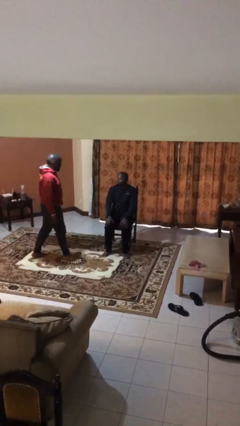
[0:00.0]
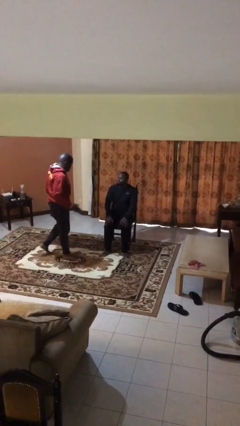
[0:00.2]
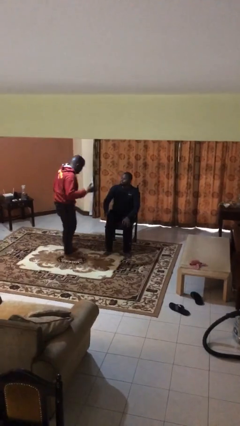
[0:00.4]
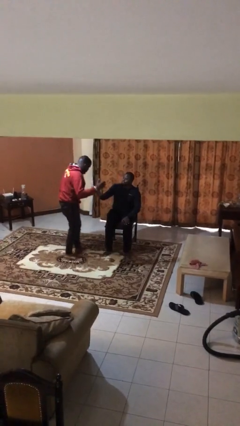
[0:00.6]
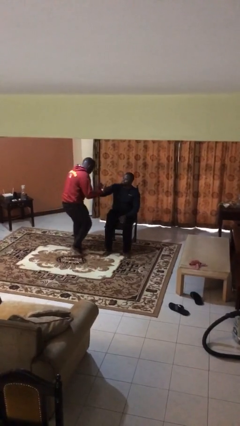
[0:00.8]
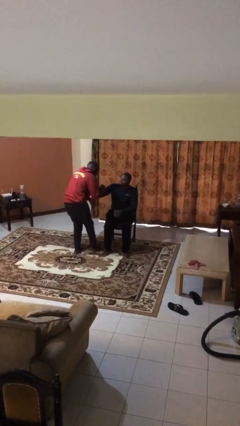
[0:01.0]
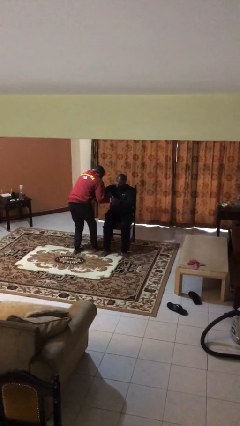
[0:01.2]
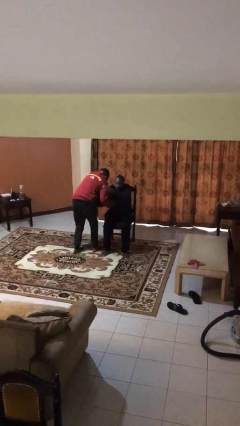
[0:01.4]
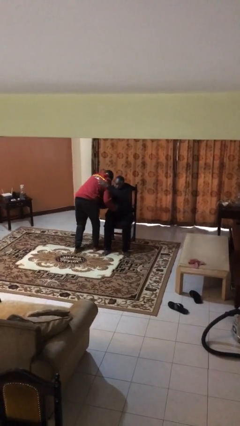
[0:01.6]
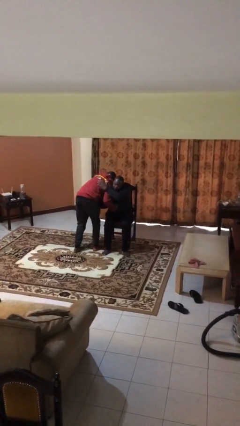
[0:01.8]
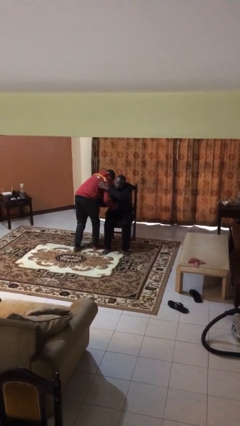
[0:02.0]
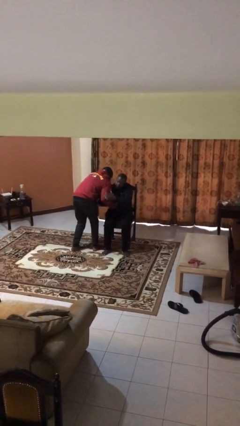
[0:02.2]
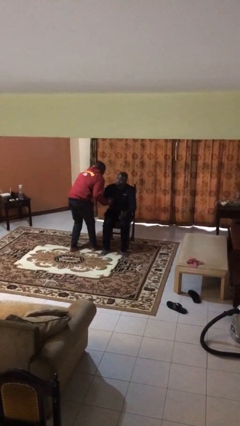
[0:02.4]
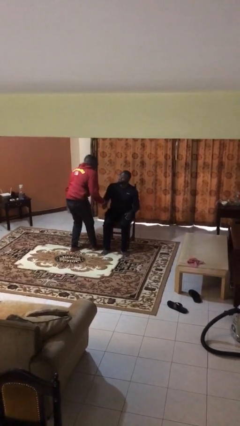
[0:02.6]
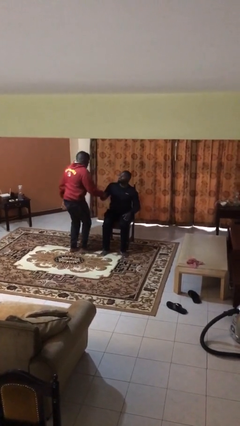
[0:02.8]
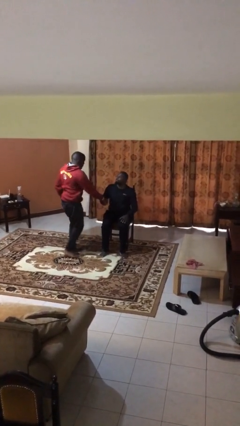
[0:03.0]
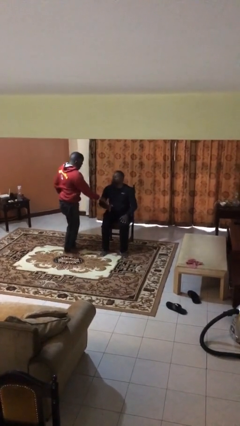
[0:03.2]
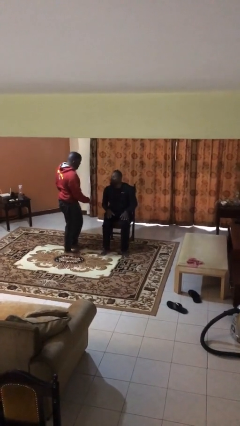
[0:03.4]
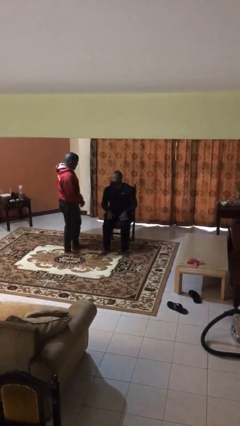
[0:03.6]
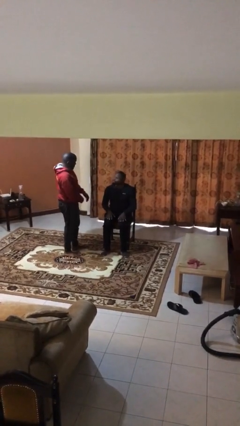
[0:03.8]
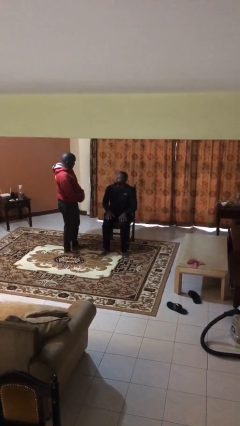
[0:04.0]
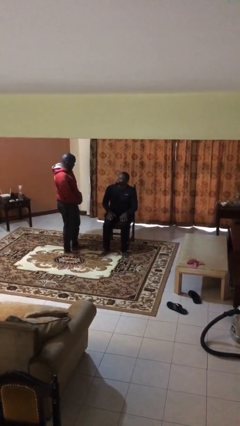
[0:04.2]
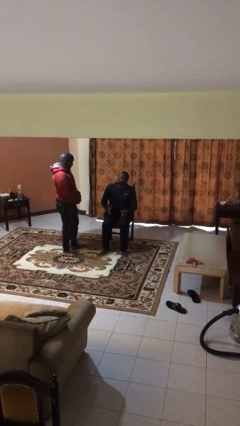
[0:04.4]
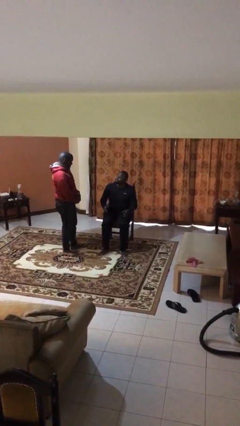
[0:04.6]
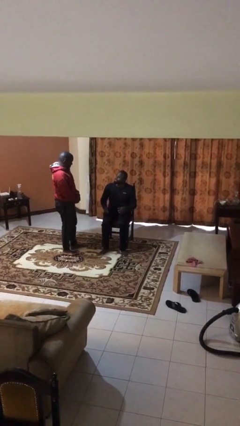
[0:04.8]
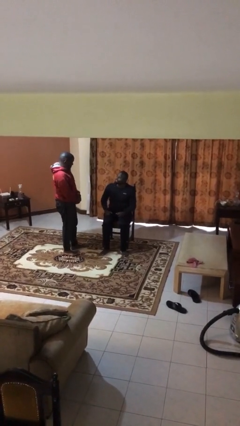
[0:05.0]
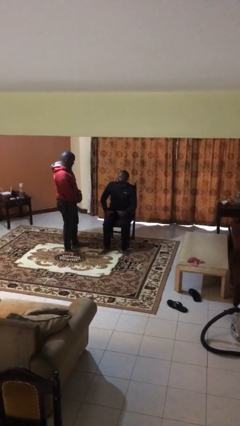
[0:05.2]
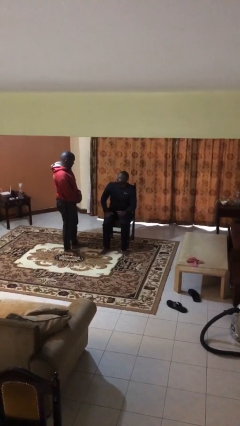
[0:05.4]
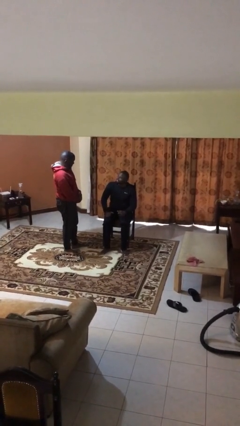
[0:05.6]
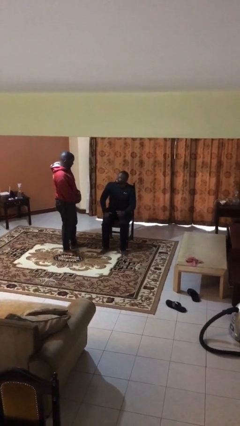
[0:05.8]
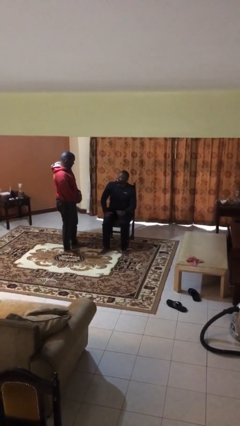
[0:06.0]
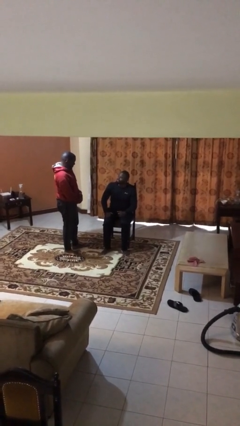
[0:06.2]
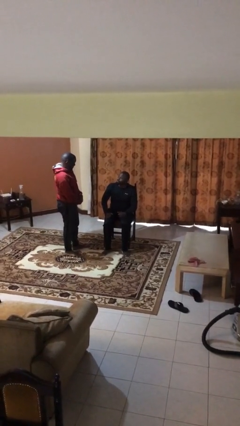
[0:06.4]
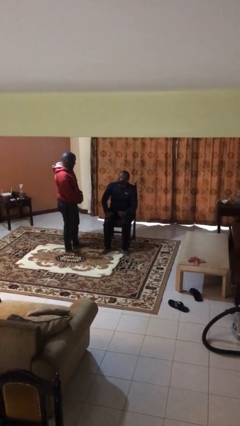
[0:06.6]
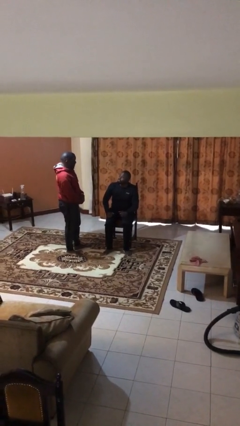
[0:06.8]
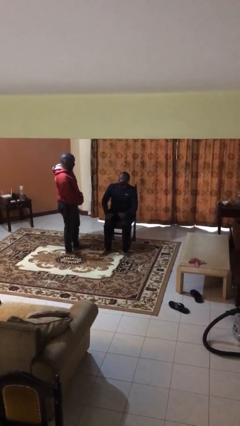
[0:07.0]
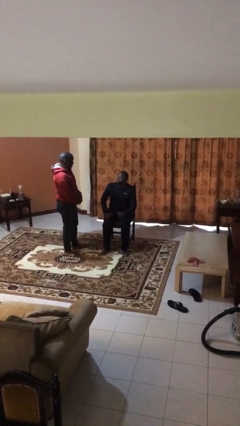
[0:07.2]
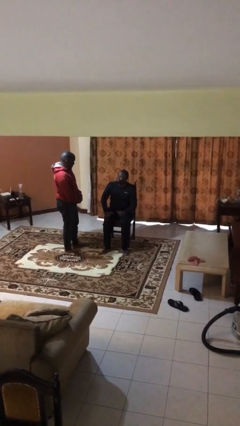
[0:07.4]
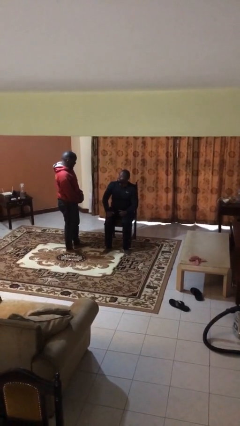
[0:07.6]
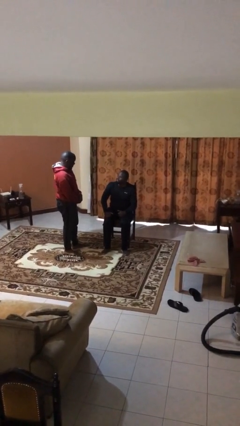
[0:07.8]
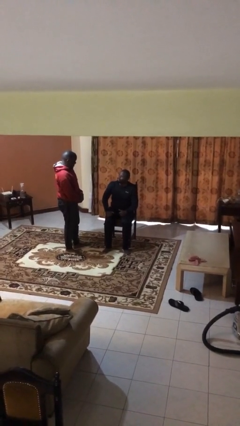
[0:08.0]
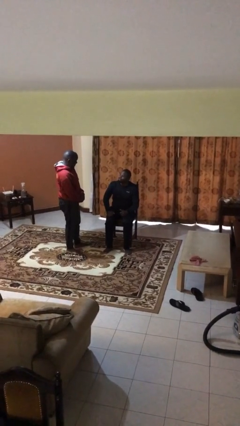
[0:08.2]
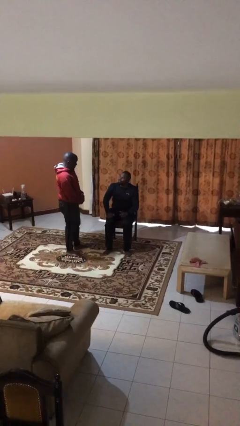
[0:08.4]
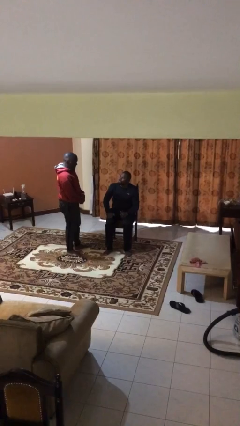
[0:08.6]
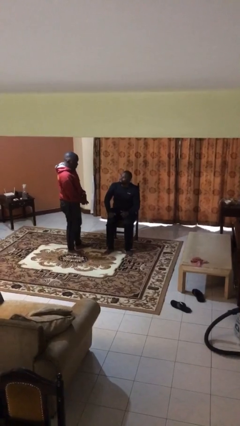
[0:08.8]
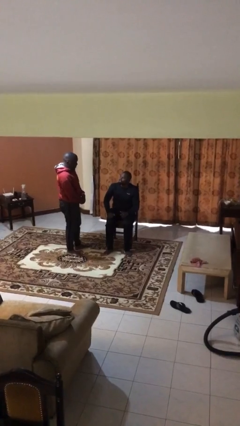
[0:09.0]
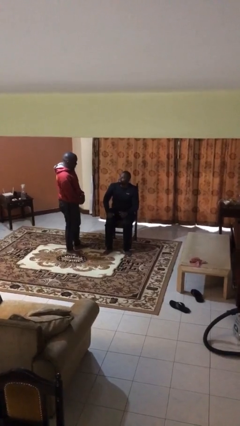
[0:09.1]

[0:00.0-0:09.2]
person embraces person

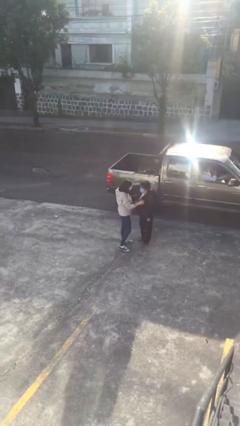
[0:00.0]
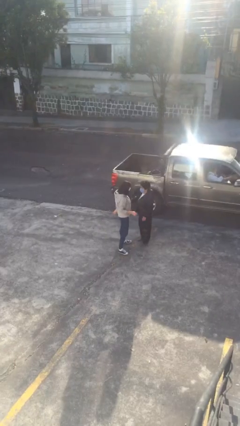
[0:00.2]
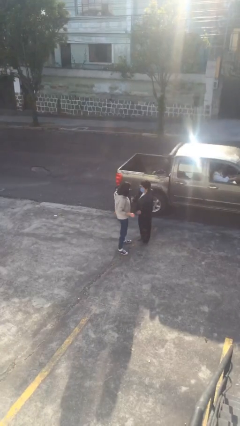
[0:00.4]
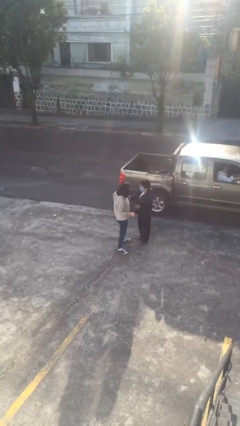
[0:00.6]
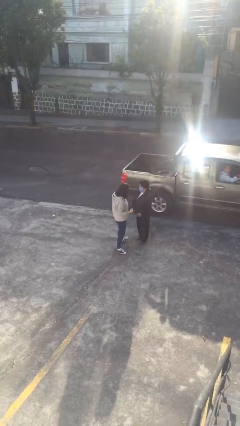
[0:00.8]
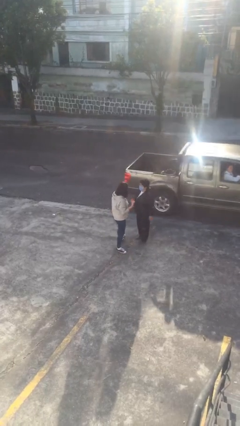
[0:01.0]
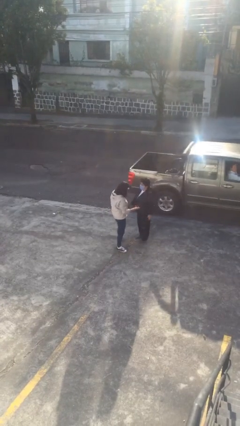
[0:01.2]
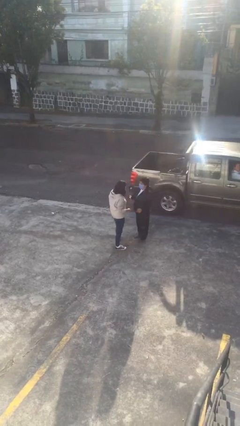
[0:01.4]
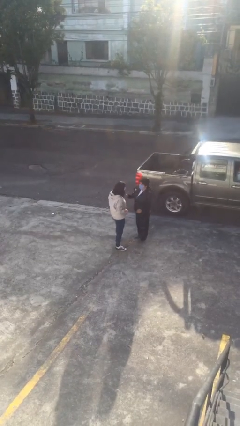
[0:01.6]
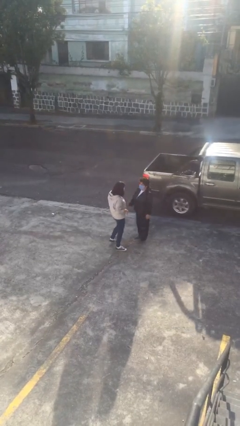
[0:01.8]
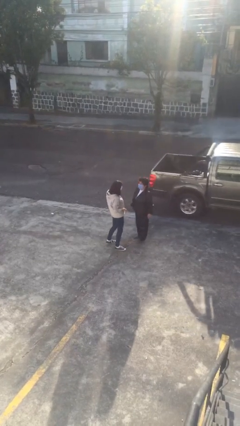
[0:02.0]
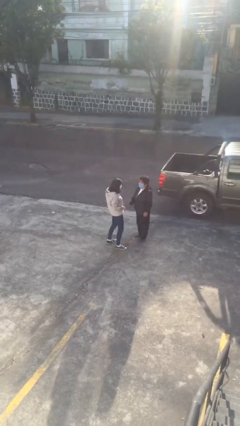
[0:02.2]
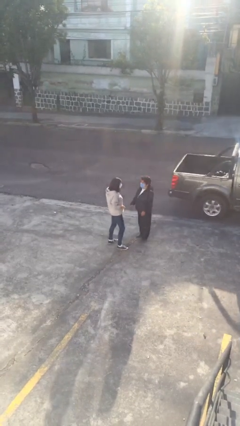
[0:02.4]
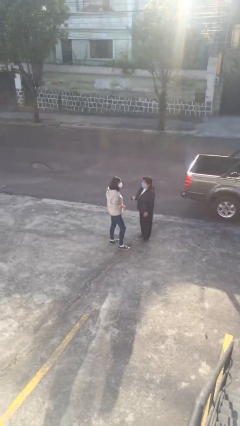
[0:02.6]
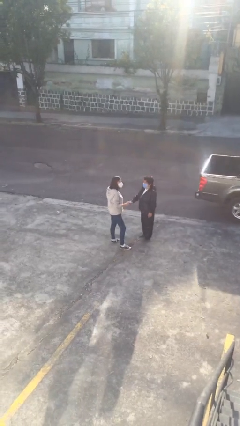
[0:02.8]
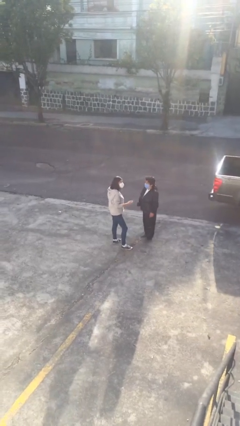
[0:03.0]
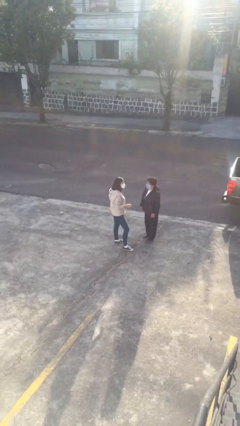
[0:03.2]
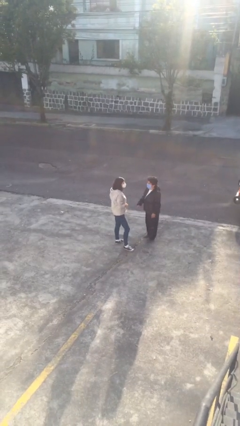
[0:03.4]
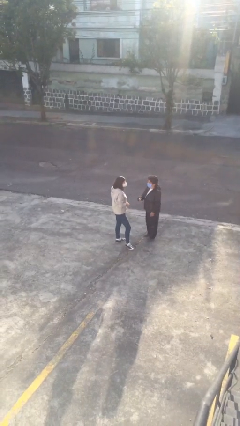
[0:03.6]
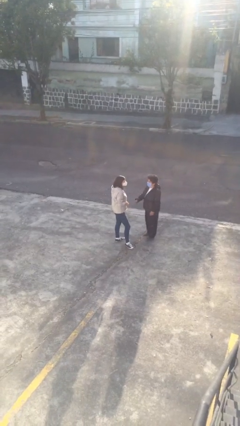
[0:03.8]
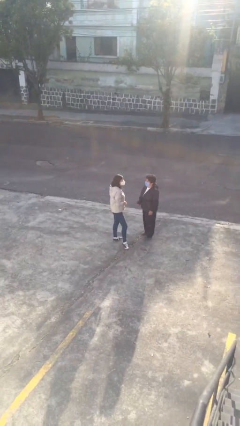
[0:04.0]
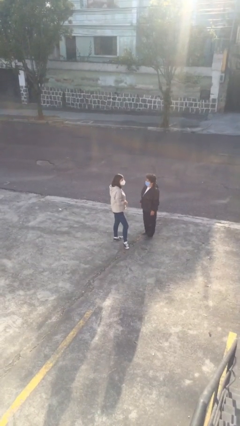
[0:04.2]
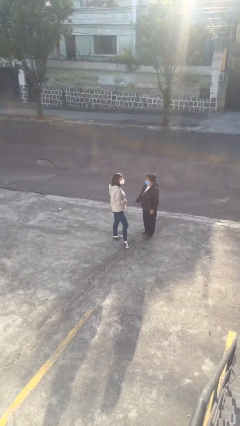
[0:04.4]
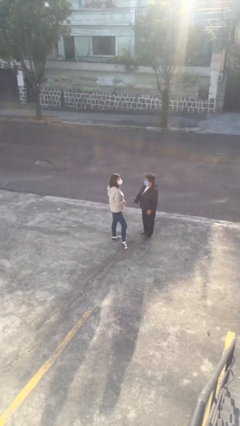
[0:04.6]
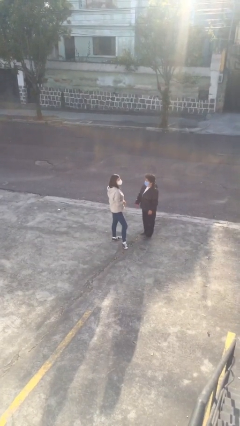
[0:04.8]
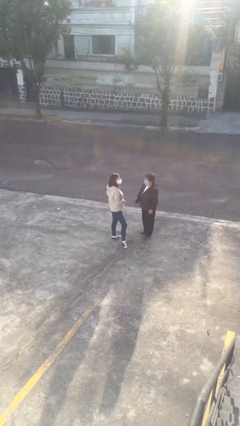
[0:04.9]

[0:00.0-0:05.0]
person talks to person

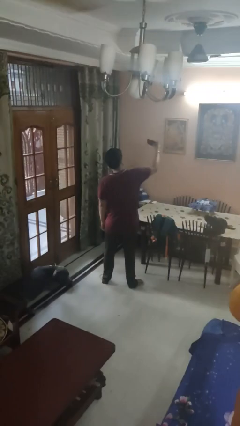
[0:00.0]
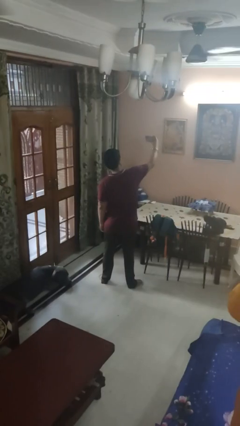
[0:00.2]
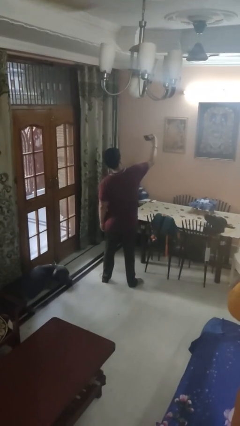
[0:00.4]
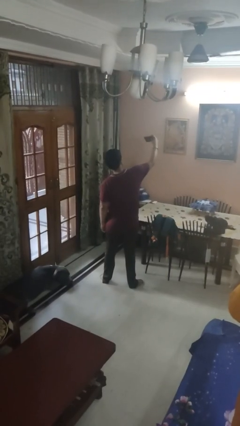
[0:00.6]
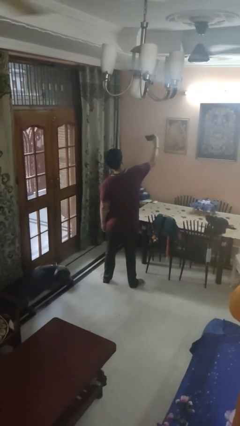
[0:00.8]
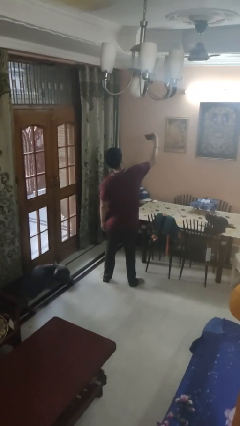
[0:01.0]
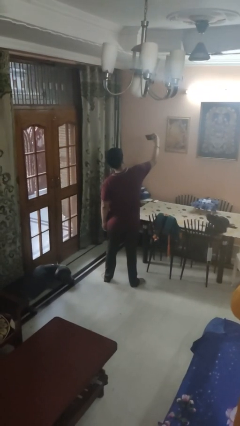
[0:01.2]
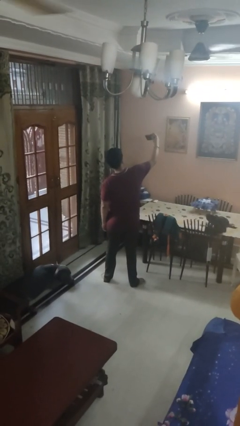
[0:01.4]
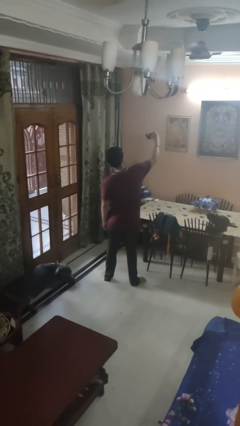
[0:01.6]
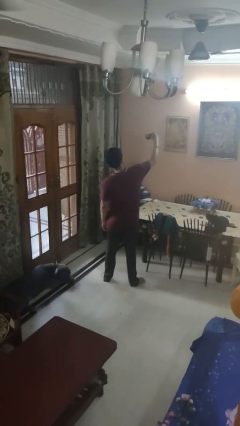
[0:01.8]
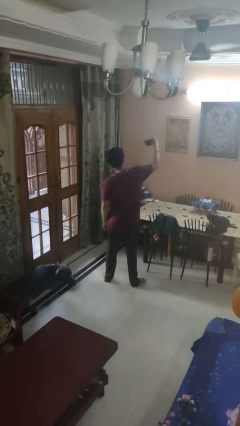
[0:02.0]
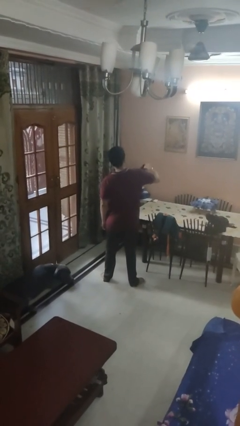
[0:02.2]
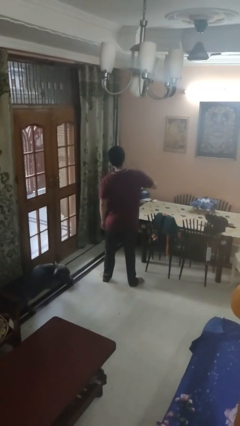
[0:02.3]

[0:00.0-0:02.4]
person takes selfie

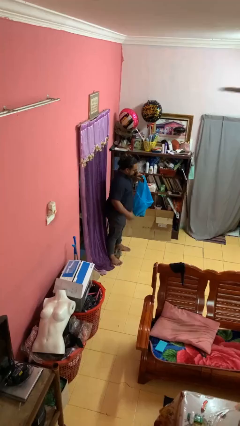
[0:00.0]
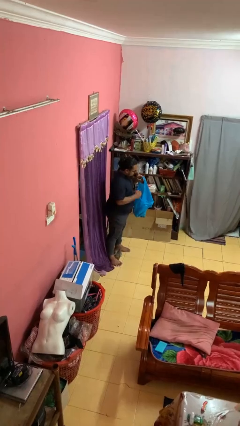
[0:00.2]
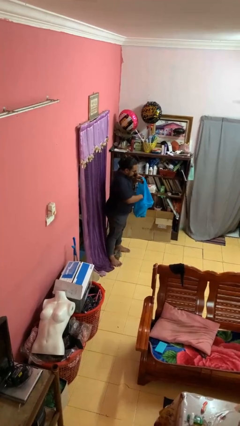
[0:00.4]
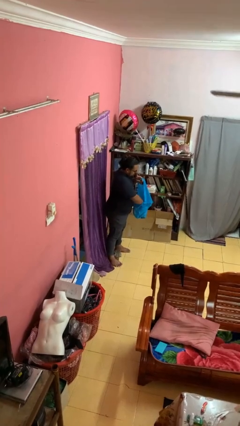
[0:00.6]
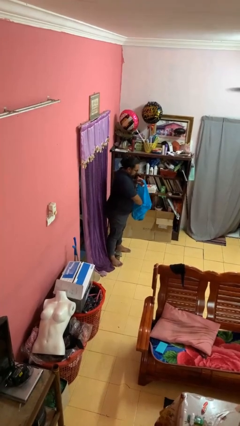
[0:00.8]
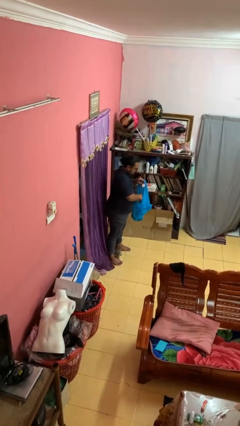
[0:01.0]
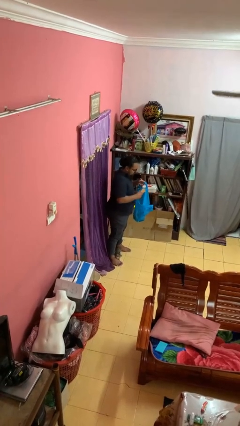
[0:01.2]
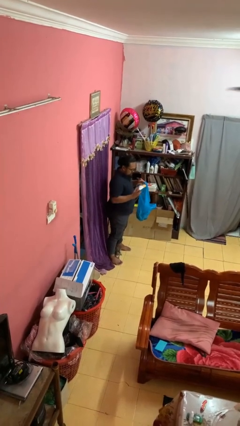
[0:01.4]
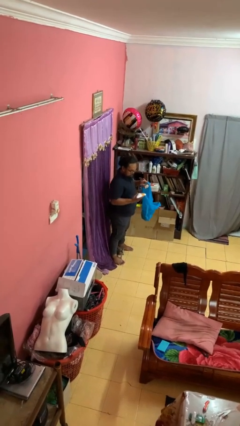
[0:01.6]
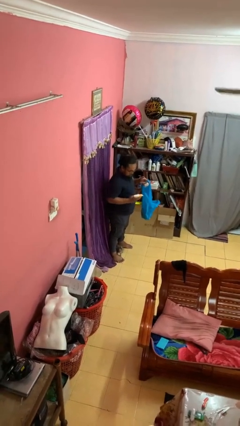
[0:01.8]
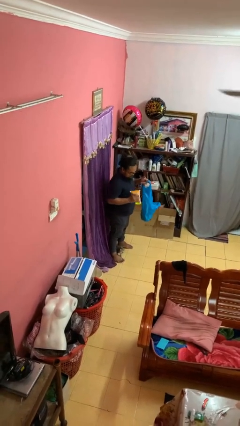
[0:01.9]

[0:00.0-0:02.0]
person takes object from bag
